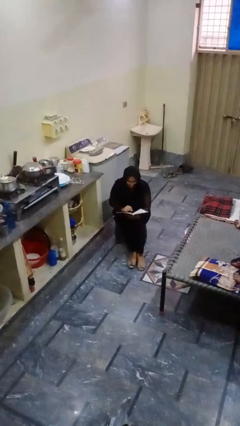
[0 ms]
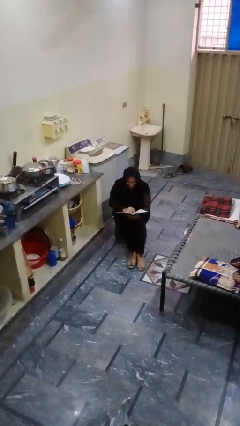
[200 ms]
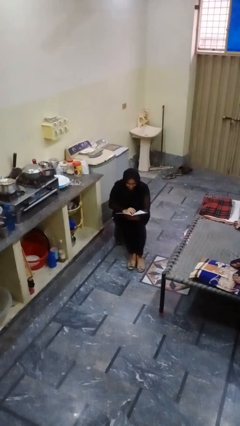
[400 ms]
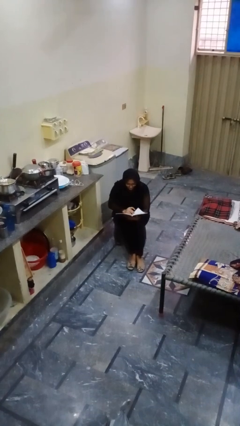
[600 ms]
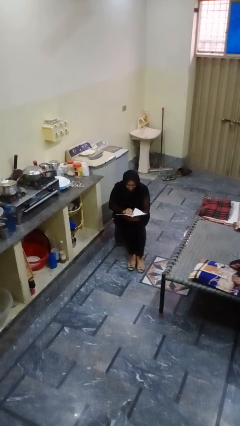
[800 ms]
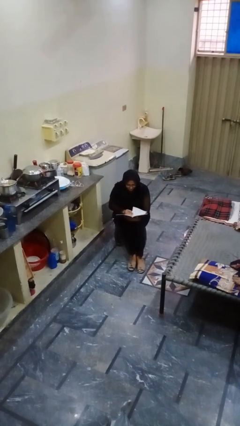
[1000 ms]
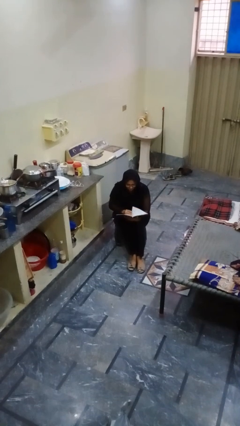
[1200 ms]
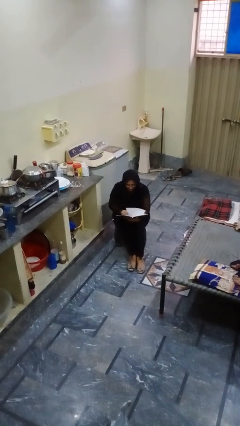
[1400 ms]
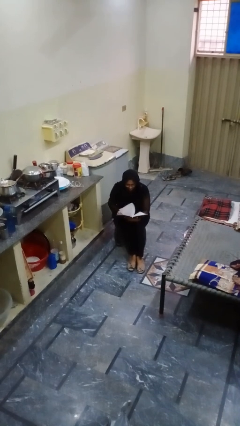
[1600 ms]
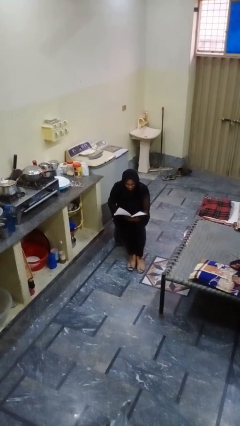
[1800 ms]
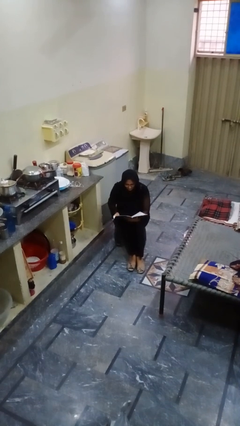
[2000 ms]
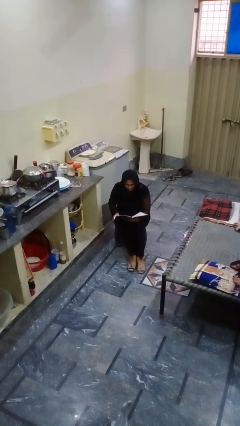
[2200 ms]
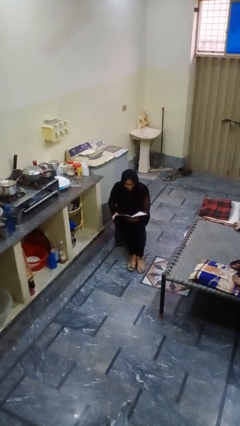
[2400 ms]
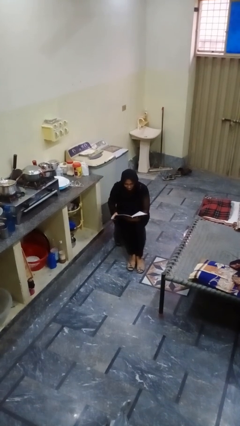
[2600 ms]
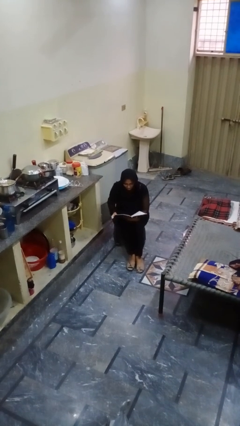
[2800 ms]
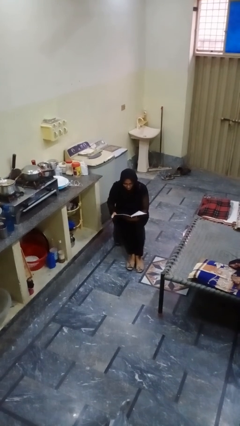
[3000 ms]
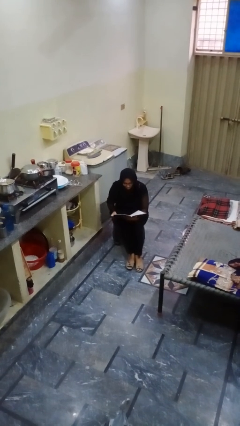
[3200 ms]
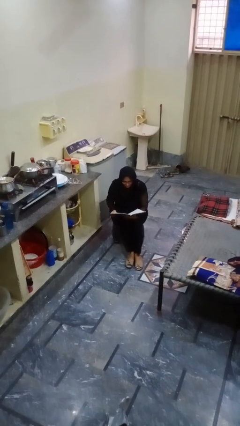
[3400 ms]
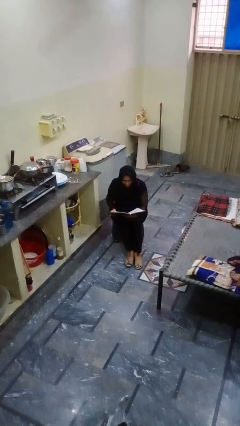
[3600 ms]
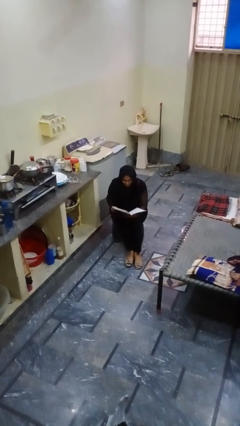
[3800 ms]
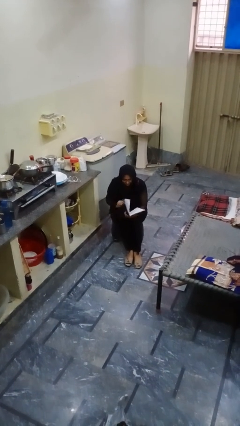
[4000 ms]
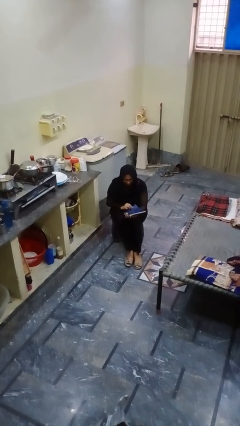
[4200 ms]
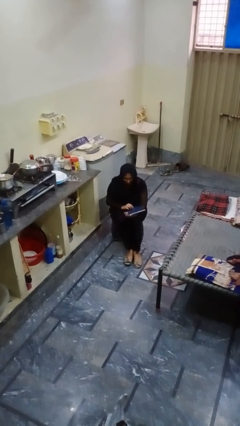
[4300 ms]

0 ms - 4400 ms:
person reads magazine

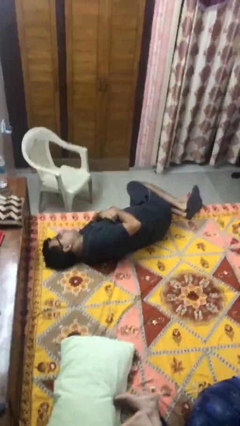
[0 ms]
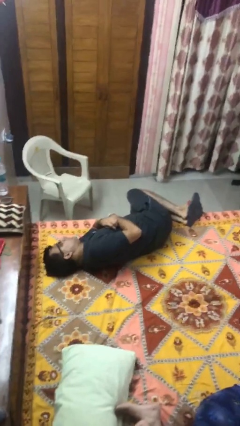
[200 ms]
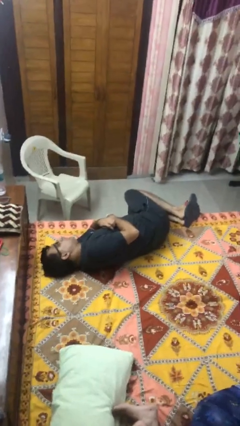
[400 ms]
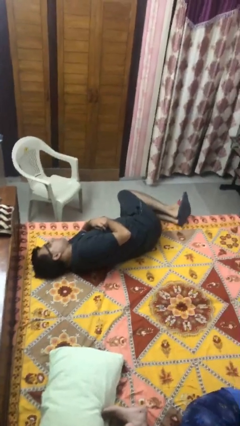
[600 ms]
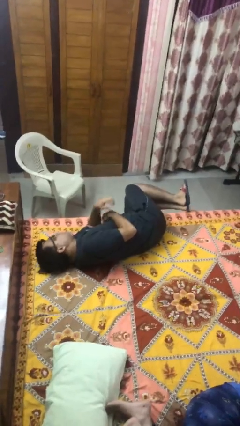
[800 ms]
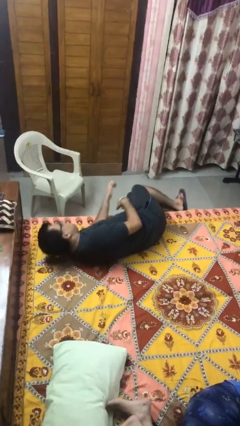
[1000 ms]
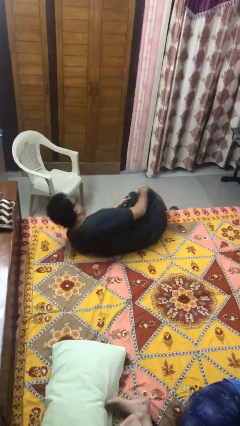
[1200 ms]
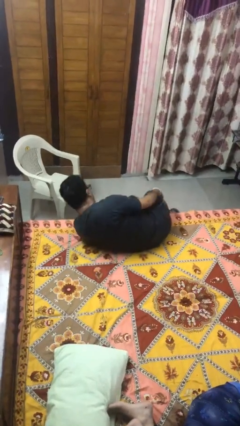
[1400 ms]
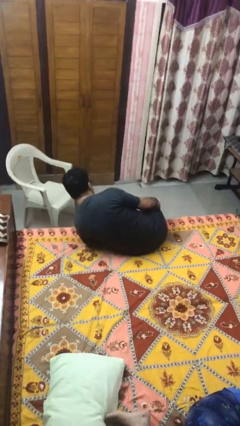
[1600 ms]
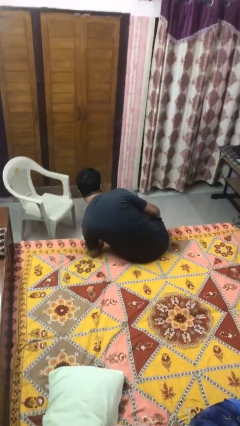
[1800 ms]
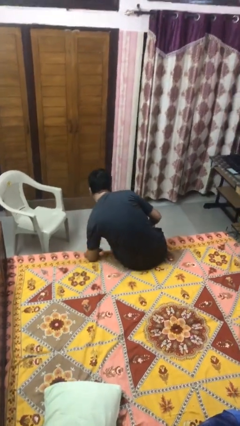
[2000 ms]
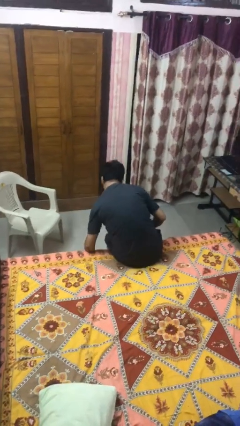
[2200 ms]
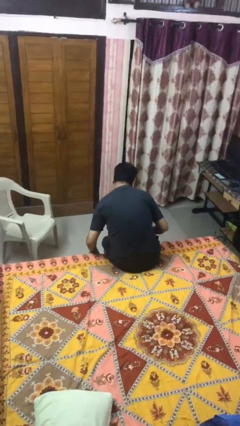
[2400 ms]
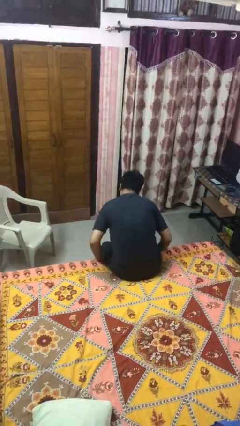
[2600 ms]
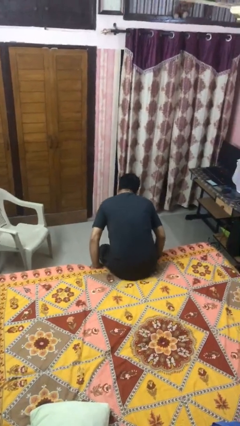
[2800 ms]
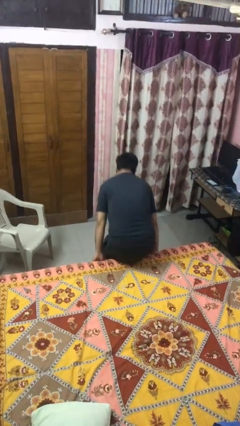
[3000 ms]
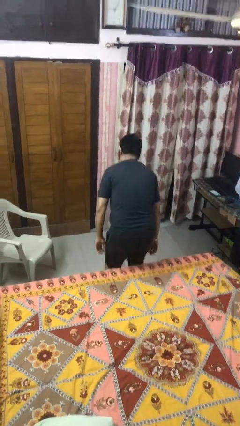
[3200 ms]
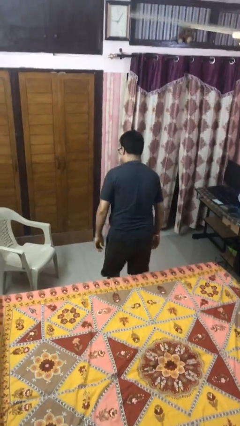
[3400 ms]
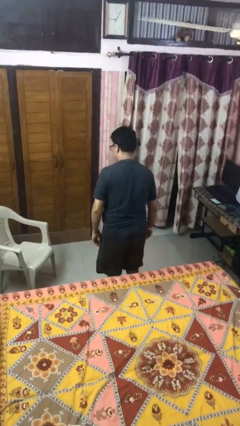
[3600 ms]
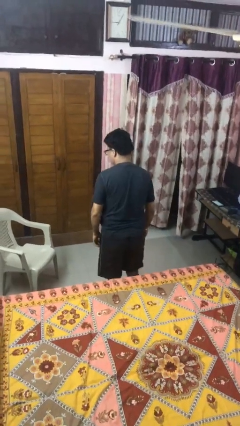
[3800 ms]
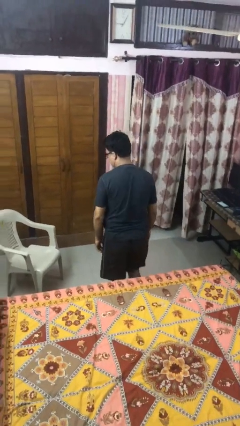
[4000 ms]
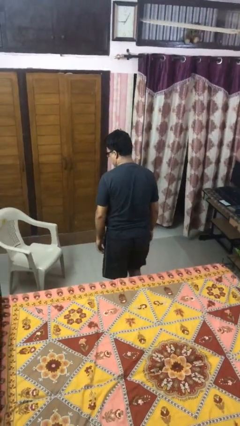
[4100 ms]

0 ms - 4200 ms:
person stands up

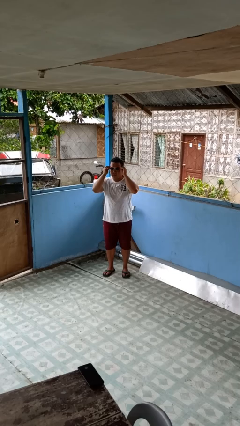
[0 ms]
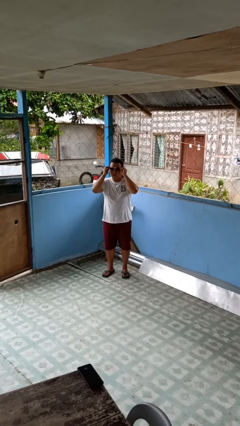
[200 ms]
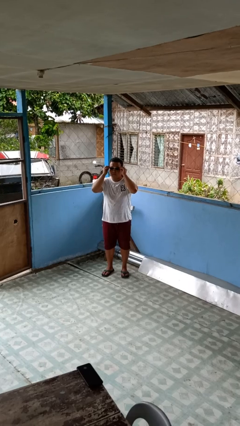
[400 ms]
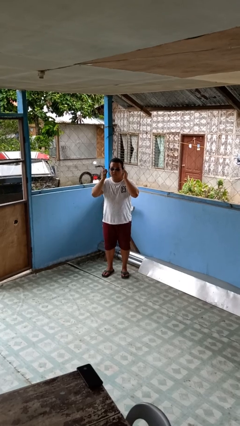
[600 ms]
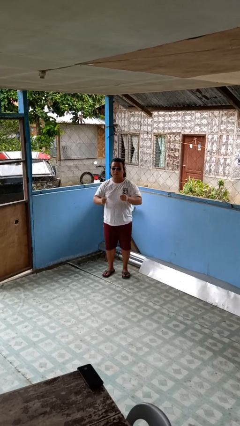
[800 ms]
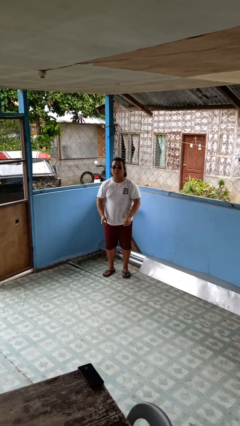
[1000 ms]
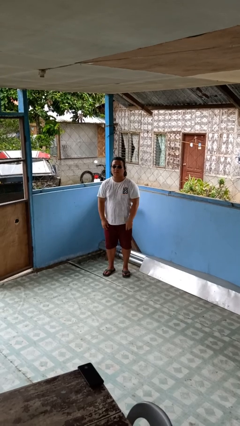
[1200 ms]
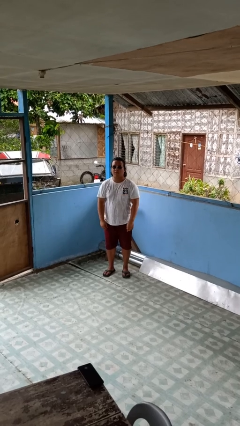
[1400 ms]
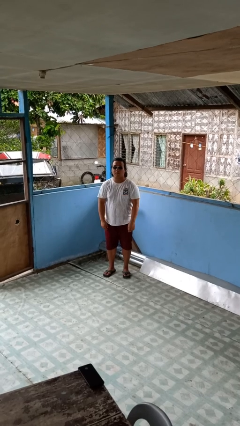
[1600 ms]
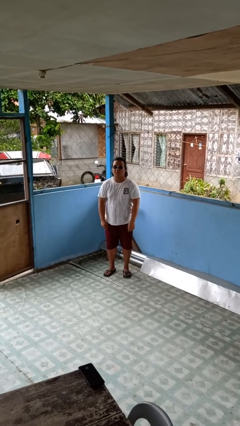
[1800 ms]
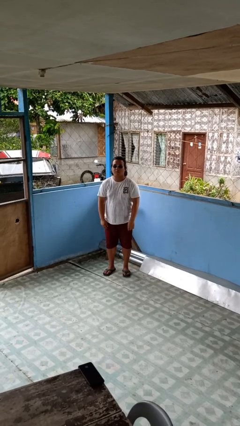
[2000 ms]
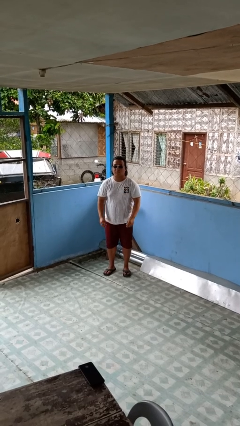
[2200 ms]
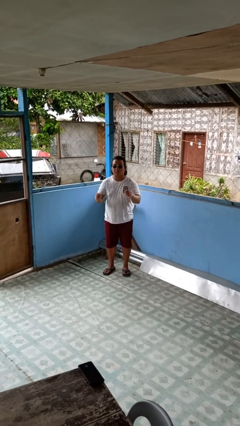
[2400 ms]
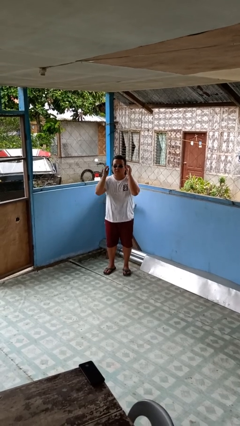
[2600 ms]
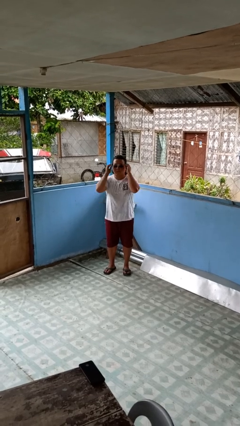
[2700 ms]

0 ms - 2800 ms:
person puts on sunglasses

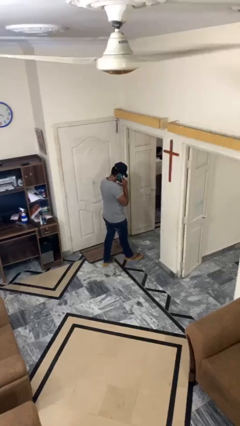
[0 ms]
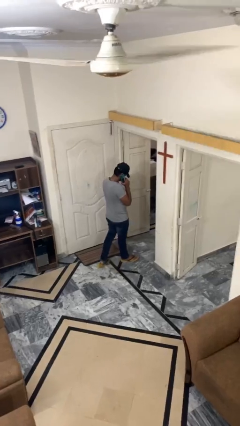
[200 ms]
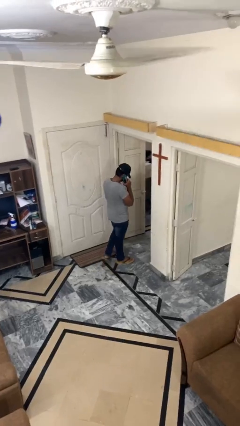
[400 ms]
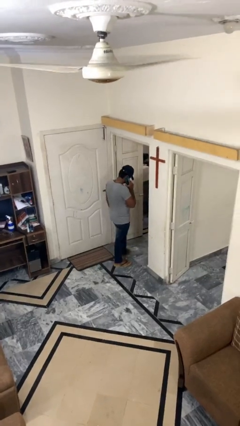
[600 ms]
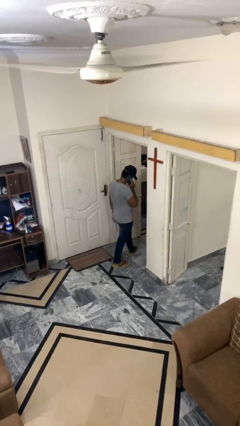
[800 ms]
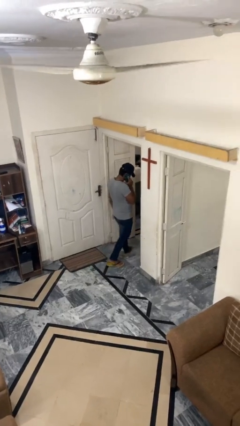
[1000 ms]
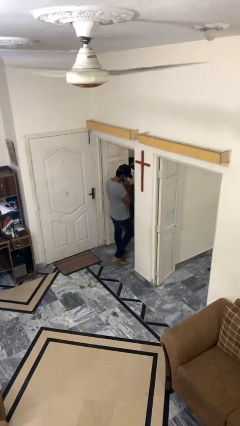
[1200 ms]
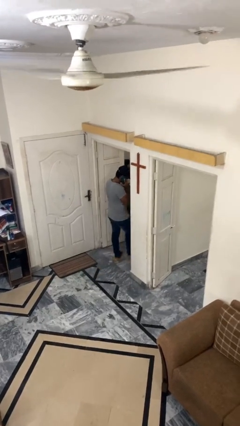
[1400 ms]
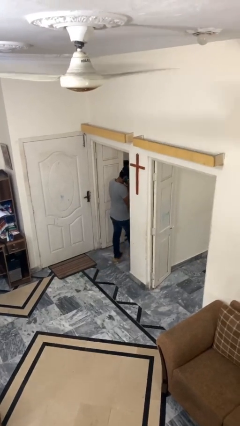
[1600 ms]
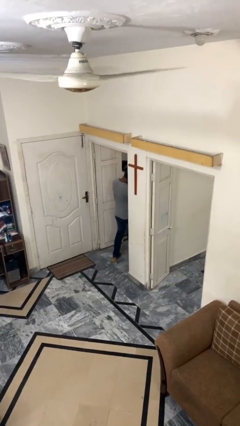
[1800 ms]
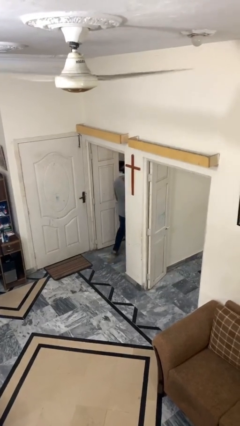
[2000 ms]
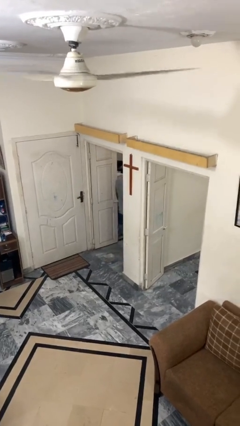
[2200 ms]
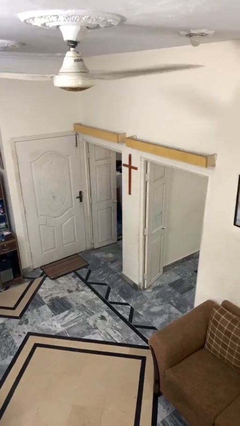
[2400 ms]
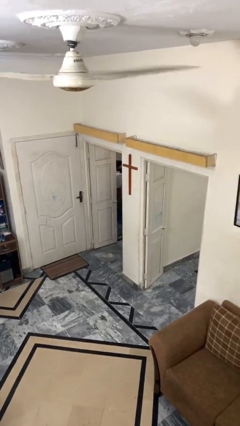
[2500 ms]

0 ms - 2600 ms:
person exits scene through structure

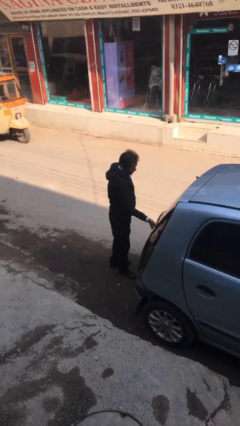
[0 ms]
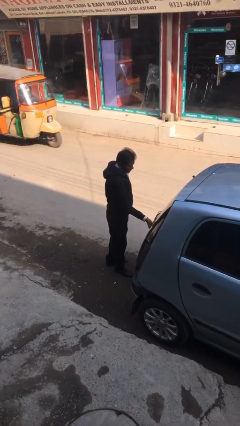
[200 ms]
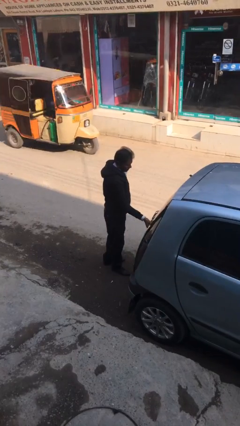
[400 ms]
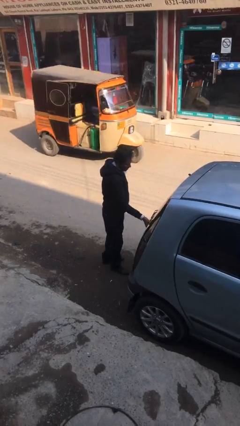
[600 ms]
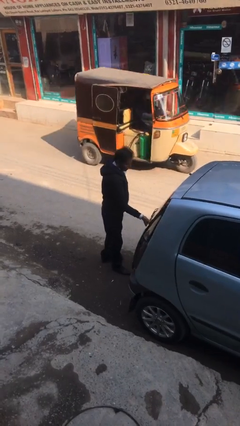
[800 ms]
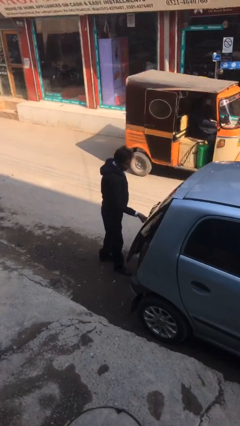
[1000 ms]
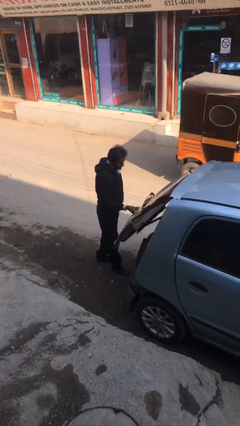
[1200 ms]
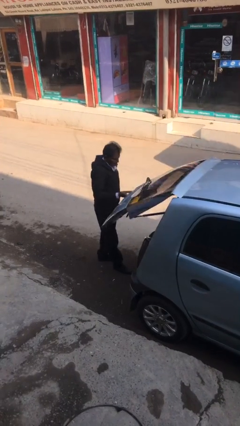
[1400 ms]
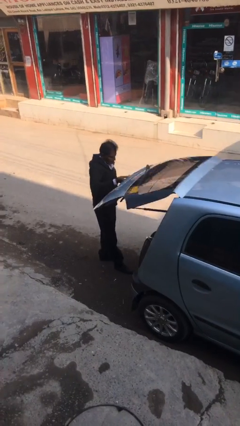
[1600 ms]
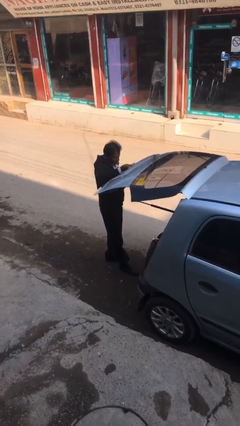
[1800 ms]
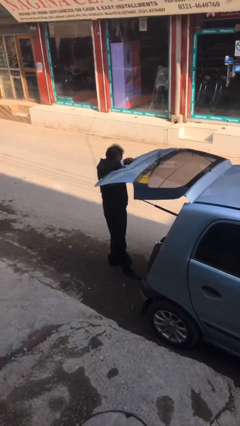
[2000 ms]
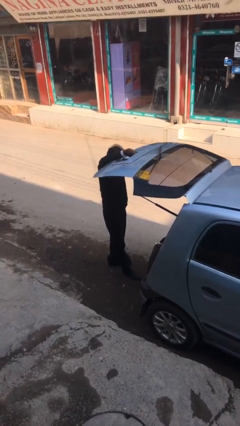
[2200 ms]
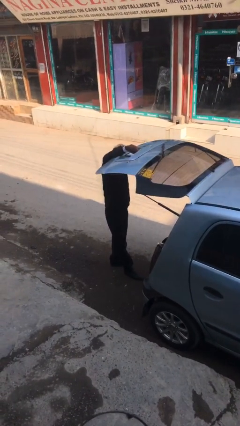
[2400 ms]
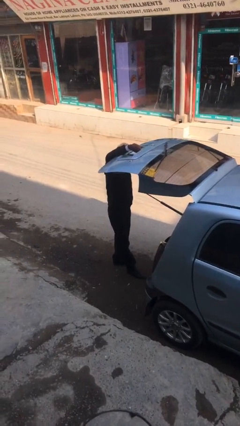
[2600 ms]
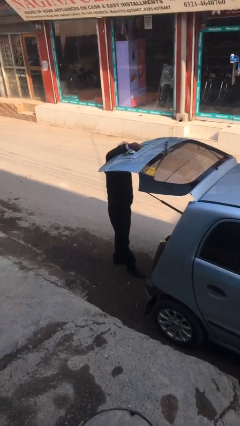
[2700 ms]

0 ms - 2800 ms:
person opens car trunk

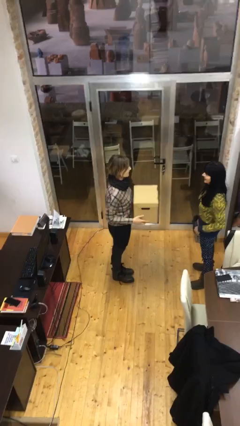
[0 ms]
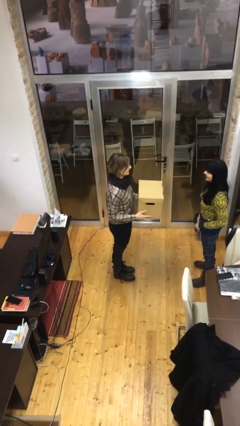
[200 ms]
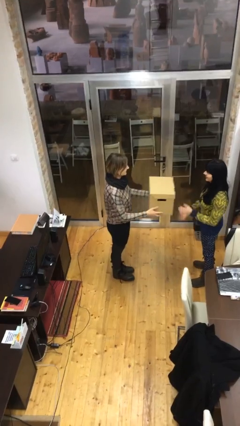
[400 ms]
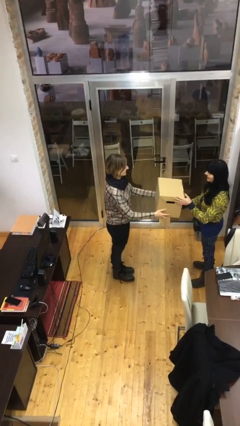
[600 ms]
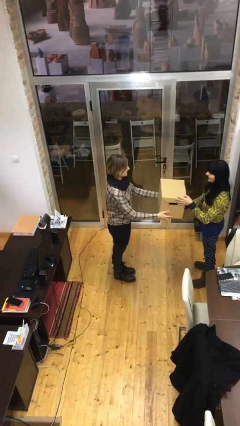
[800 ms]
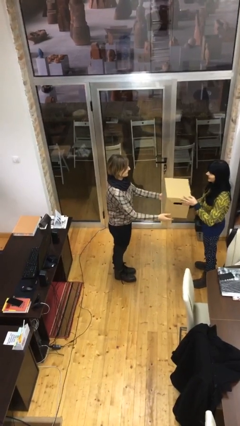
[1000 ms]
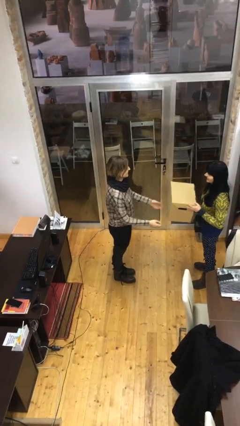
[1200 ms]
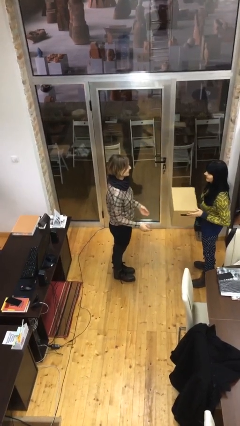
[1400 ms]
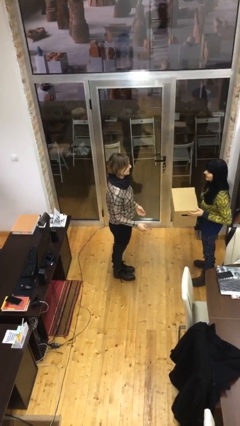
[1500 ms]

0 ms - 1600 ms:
person transfers object to person
